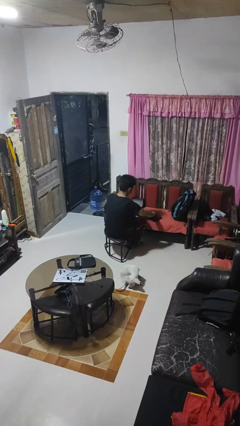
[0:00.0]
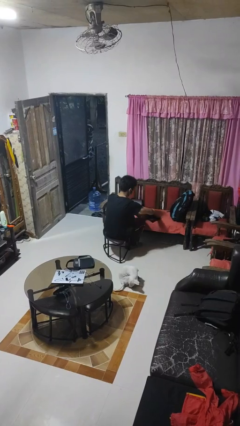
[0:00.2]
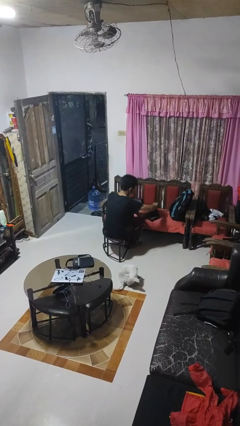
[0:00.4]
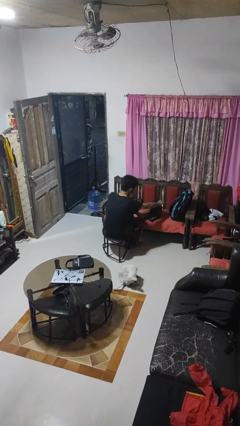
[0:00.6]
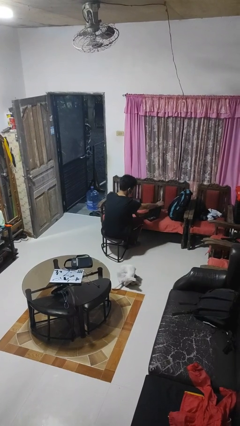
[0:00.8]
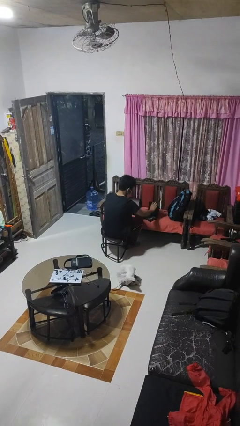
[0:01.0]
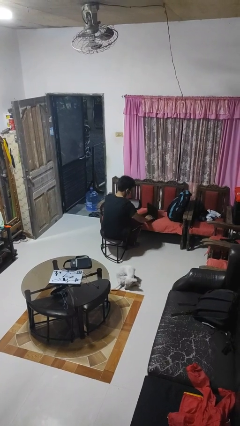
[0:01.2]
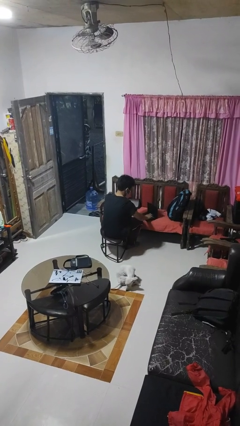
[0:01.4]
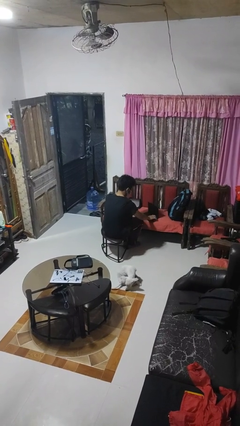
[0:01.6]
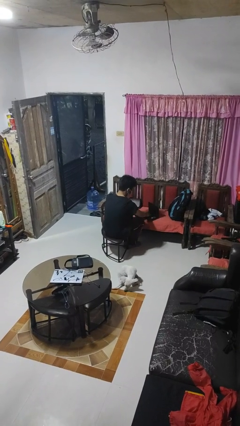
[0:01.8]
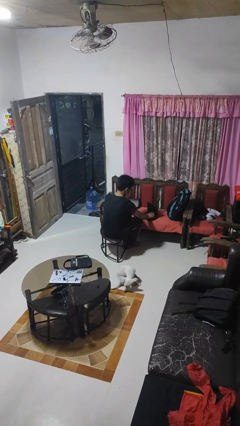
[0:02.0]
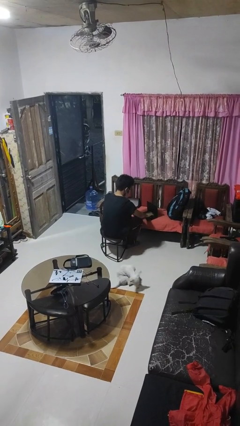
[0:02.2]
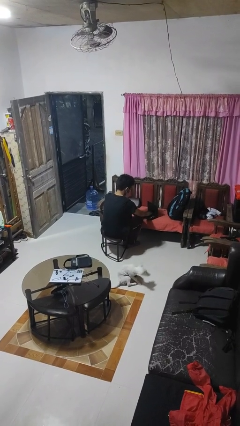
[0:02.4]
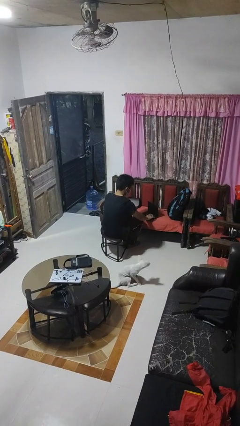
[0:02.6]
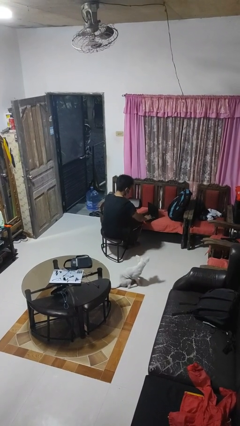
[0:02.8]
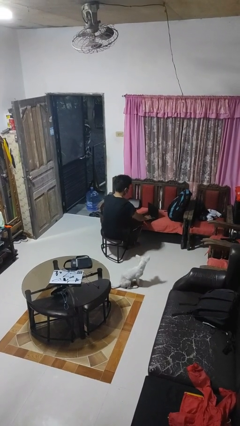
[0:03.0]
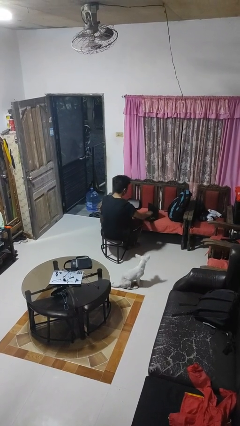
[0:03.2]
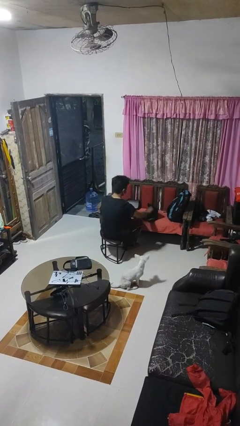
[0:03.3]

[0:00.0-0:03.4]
person opens laptop

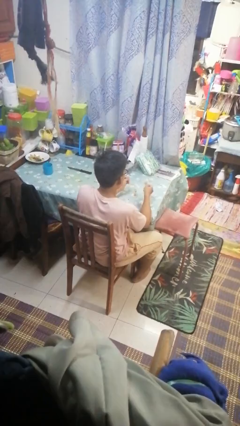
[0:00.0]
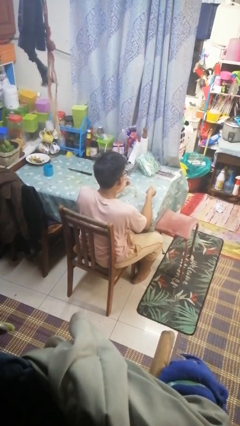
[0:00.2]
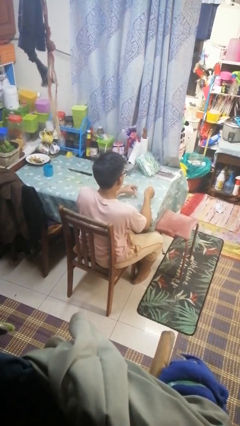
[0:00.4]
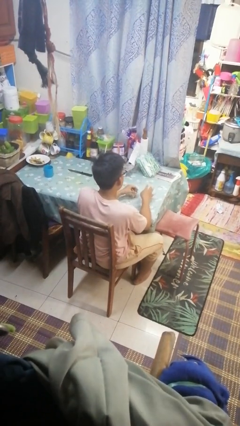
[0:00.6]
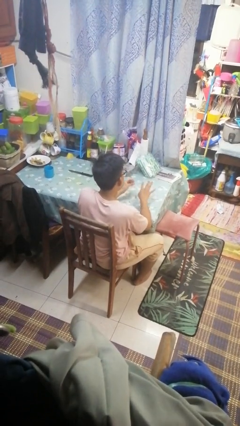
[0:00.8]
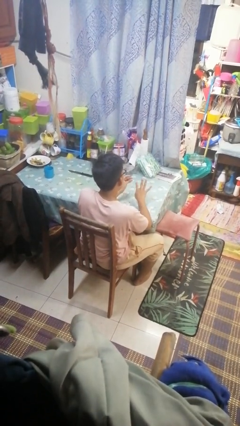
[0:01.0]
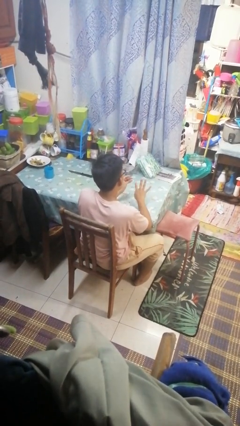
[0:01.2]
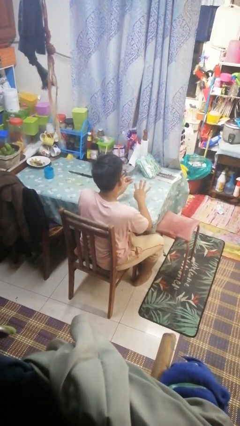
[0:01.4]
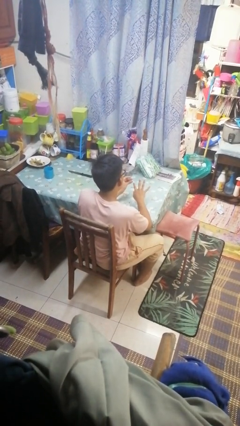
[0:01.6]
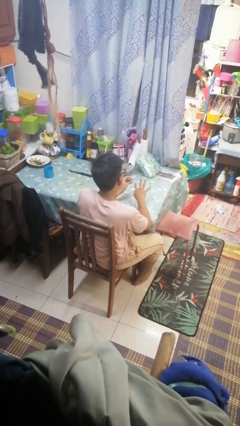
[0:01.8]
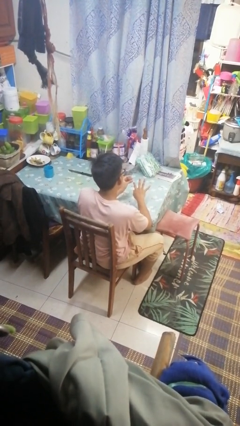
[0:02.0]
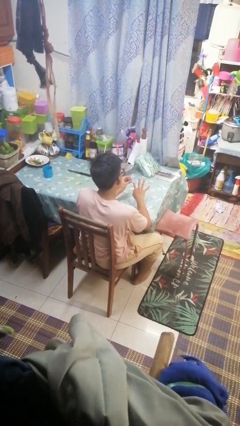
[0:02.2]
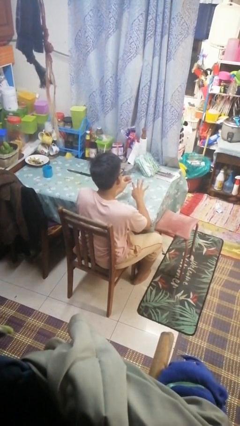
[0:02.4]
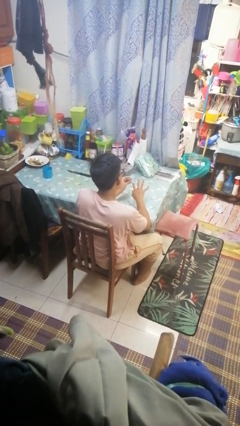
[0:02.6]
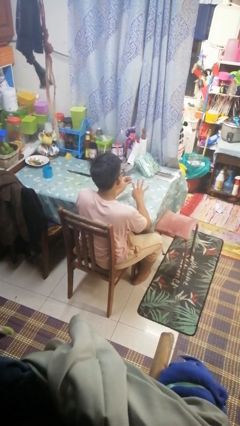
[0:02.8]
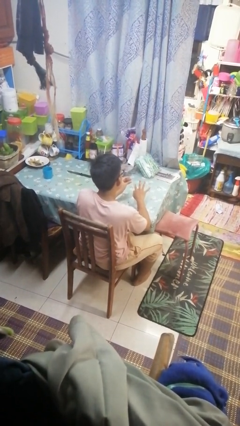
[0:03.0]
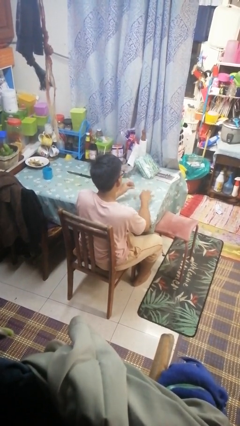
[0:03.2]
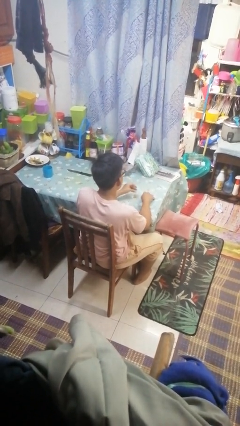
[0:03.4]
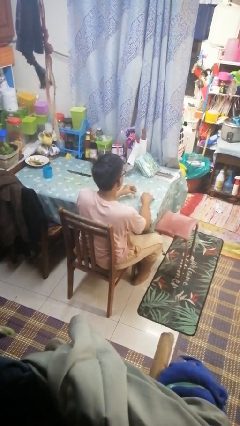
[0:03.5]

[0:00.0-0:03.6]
person paints fingernails

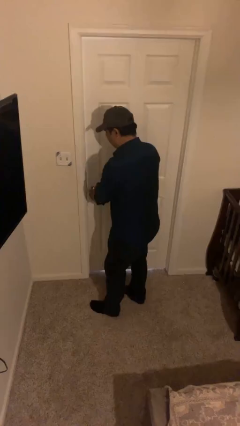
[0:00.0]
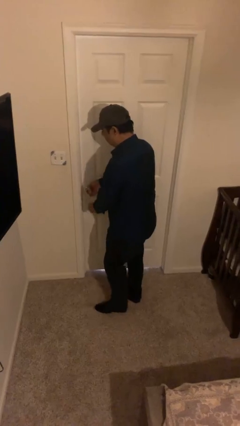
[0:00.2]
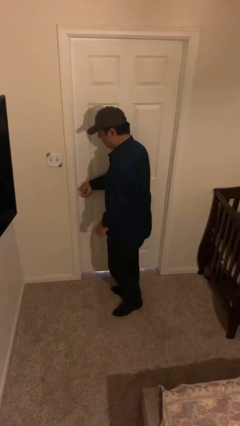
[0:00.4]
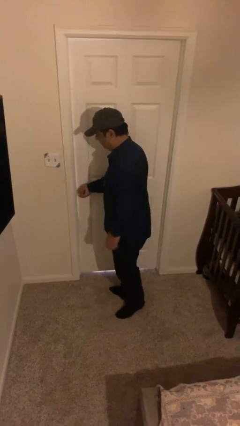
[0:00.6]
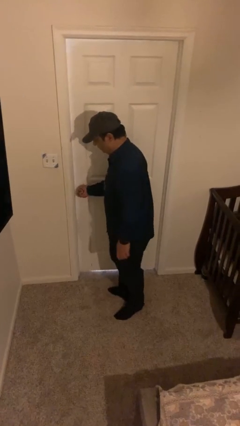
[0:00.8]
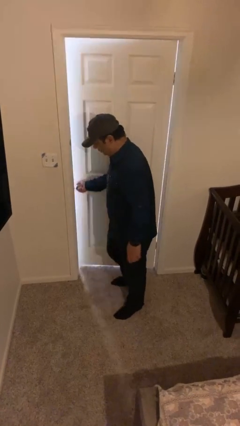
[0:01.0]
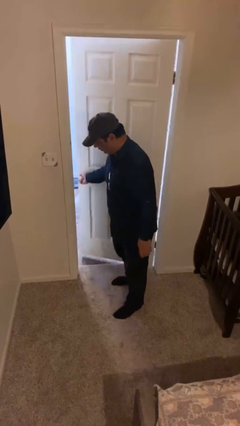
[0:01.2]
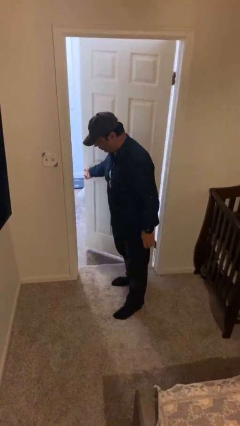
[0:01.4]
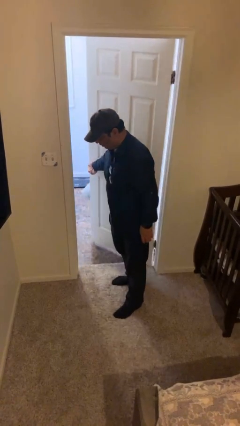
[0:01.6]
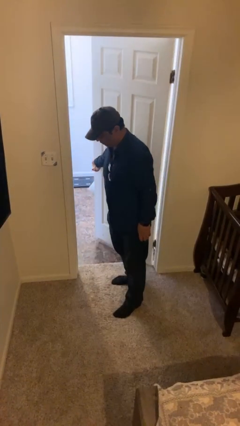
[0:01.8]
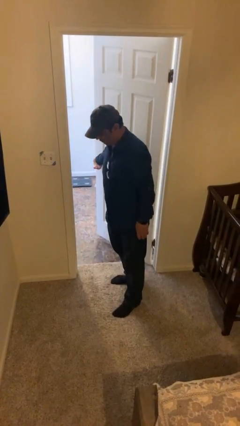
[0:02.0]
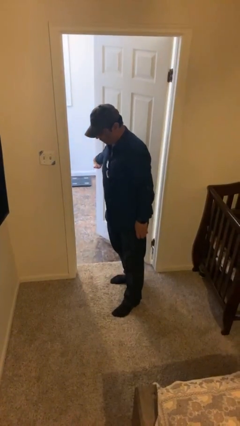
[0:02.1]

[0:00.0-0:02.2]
person opens facility door

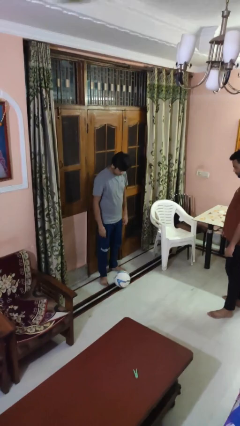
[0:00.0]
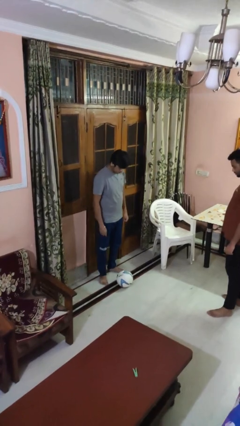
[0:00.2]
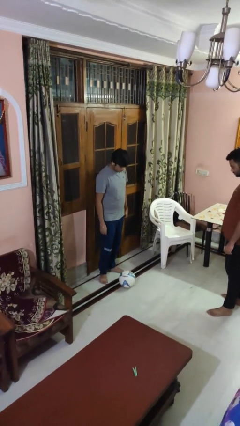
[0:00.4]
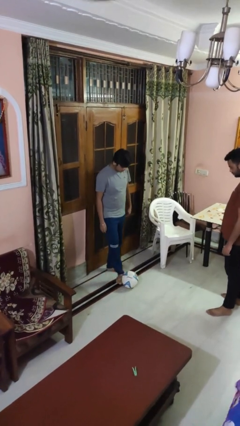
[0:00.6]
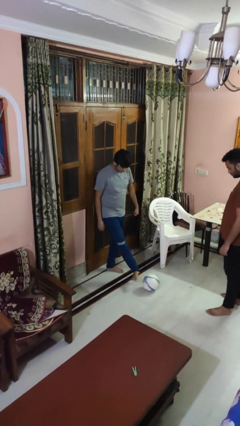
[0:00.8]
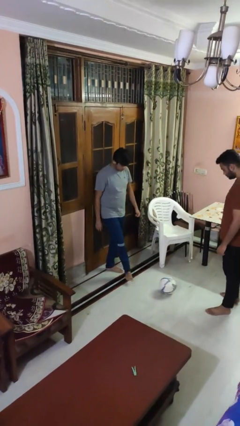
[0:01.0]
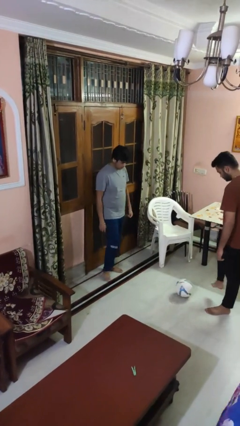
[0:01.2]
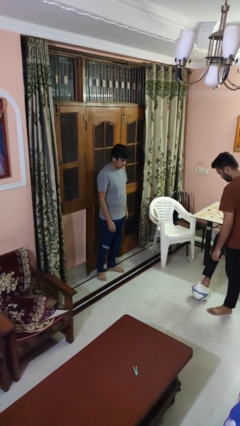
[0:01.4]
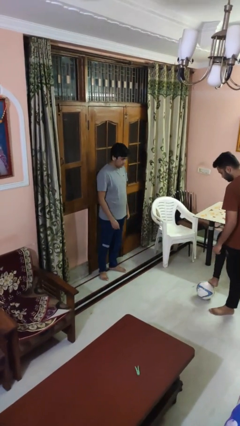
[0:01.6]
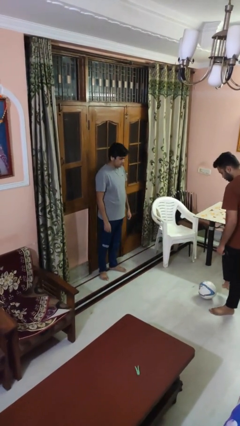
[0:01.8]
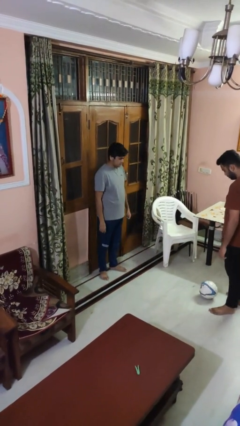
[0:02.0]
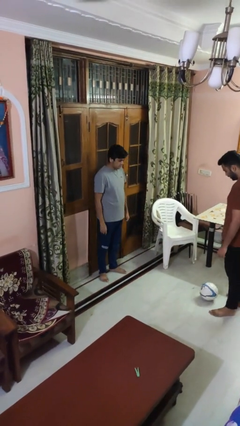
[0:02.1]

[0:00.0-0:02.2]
person kicks object to person

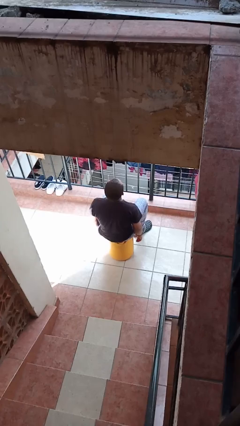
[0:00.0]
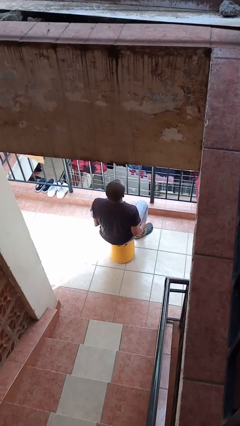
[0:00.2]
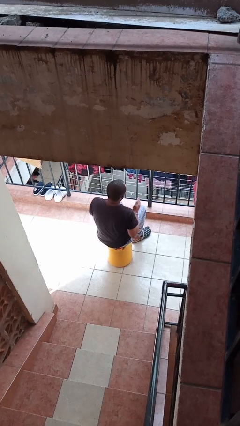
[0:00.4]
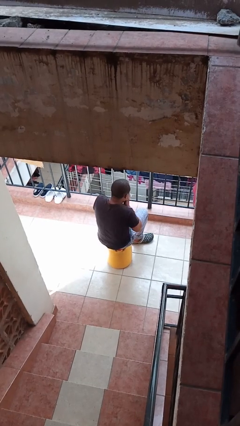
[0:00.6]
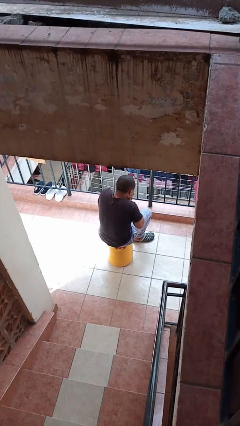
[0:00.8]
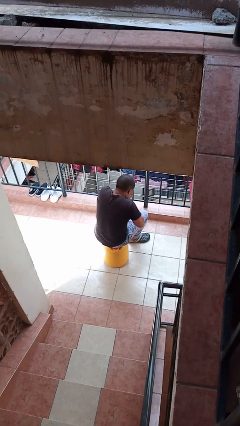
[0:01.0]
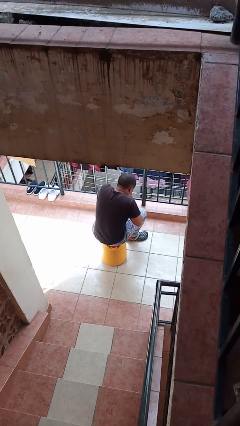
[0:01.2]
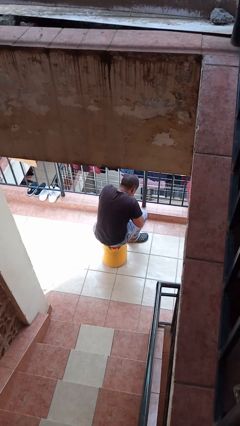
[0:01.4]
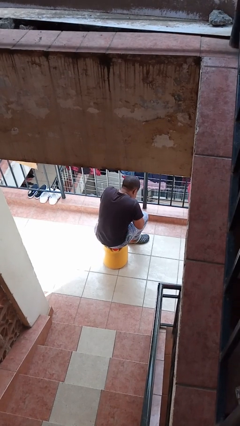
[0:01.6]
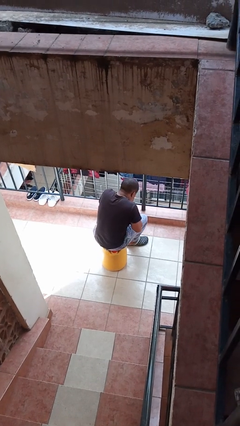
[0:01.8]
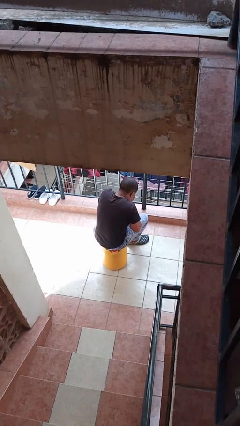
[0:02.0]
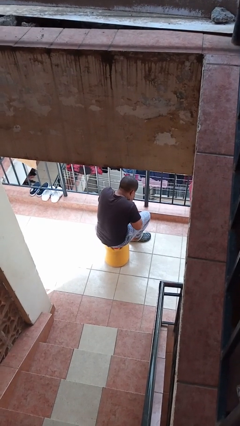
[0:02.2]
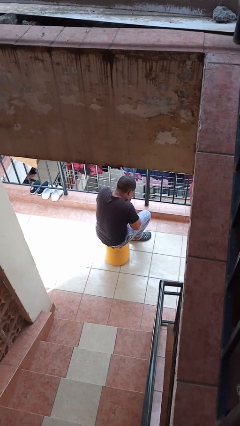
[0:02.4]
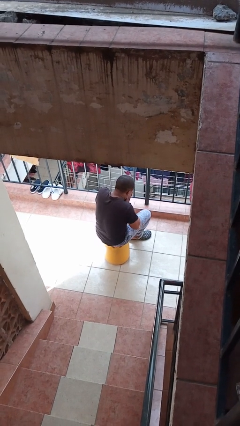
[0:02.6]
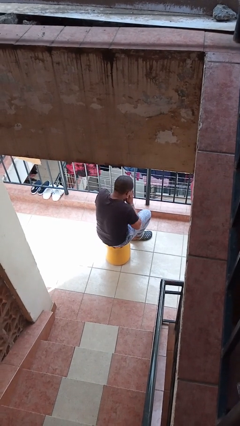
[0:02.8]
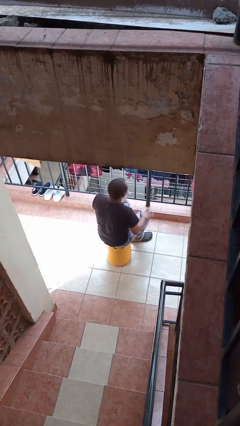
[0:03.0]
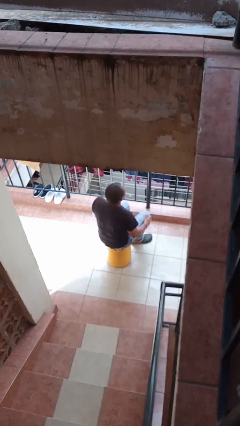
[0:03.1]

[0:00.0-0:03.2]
person blows into hands

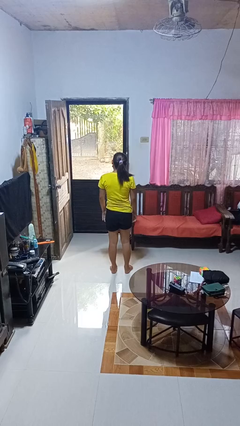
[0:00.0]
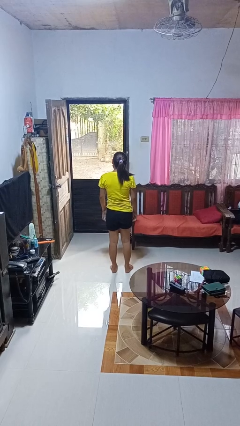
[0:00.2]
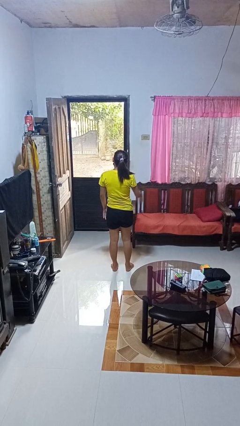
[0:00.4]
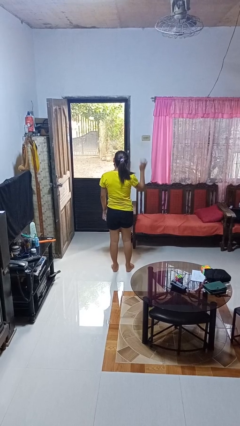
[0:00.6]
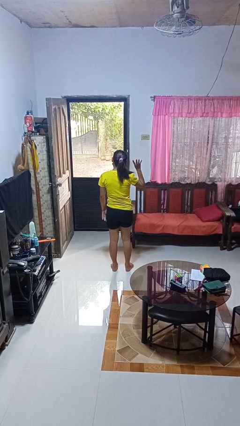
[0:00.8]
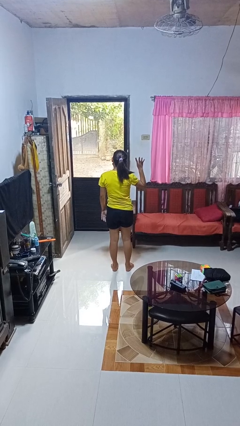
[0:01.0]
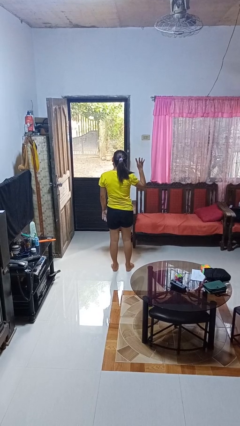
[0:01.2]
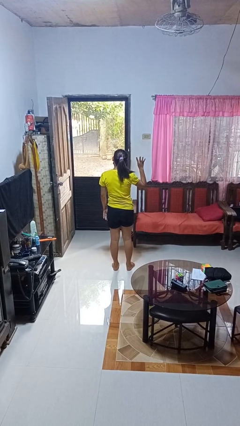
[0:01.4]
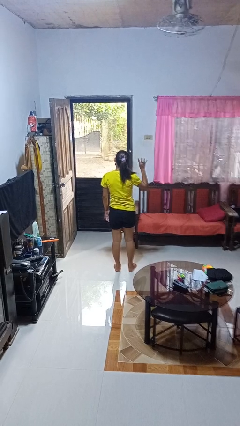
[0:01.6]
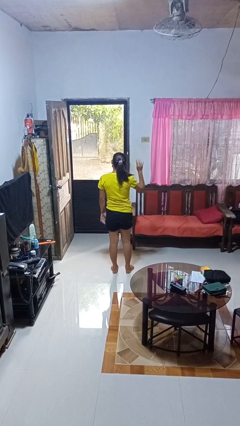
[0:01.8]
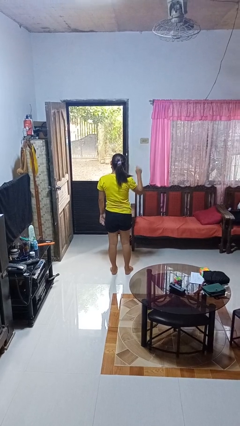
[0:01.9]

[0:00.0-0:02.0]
person gestures number four

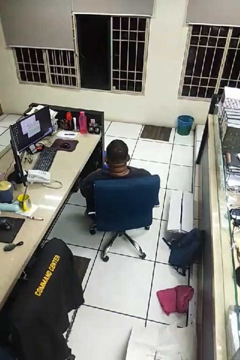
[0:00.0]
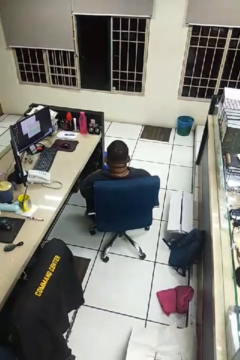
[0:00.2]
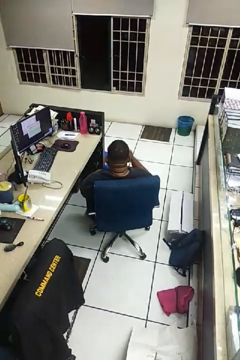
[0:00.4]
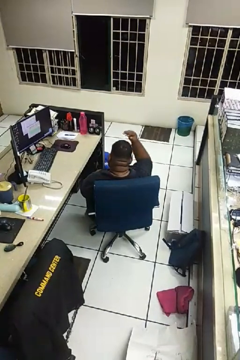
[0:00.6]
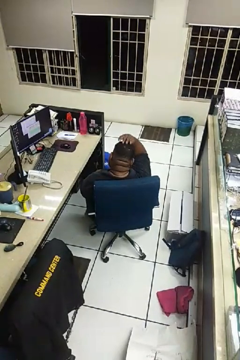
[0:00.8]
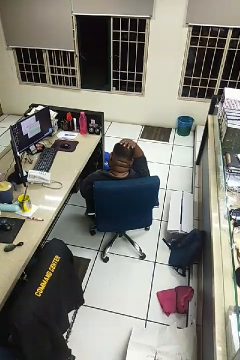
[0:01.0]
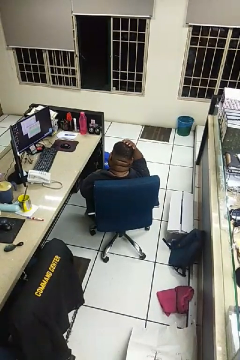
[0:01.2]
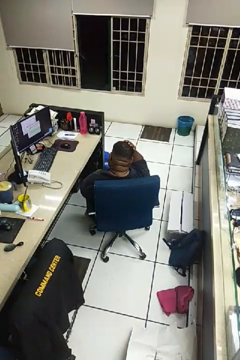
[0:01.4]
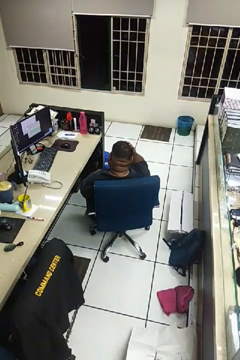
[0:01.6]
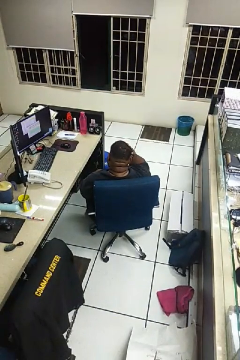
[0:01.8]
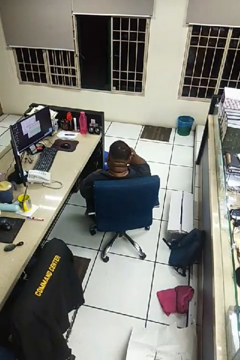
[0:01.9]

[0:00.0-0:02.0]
person strokes hair
